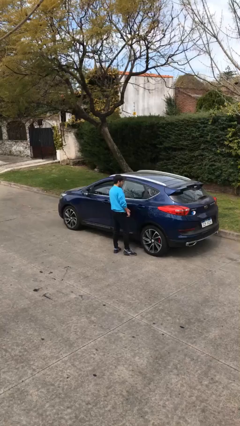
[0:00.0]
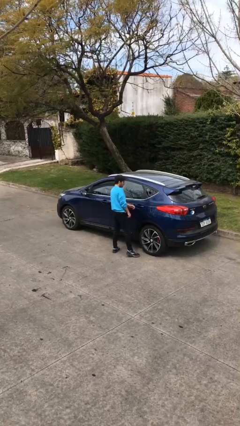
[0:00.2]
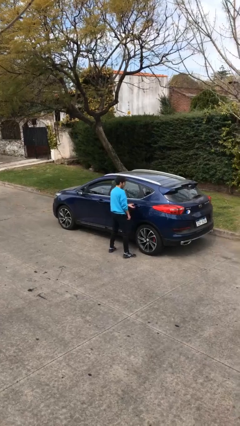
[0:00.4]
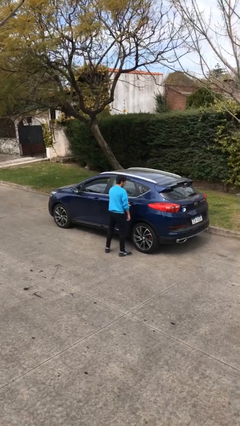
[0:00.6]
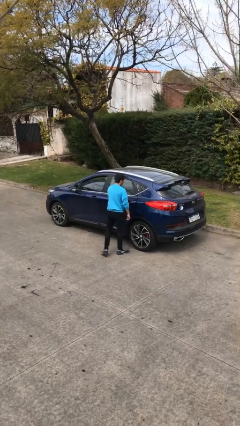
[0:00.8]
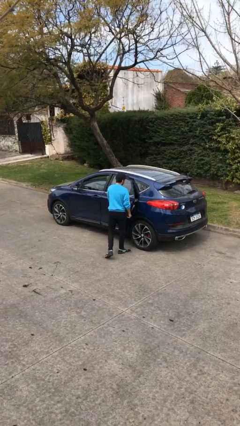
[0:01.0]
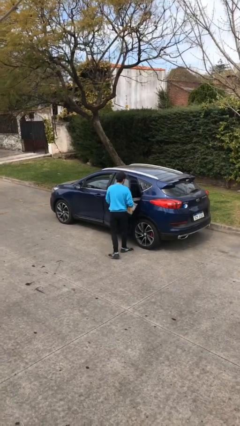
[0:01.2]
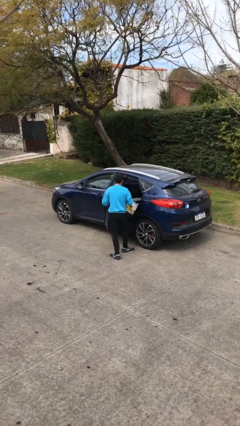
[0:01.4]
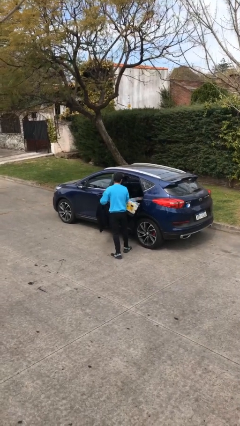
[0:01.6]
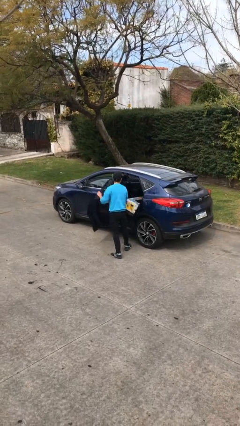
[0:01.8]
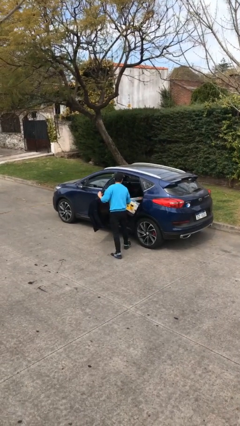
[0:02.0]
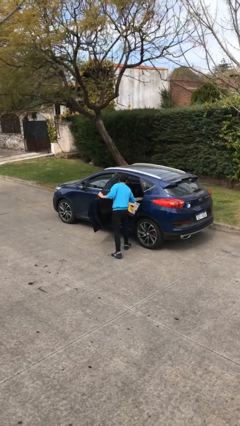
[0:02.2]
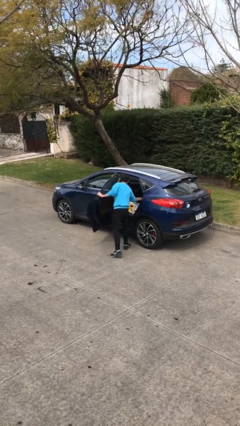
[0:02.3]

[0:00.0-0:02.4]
person opens car door

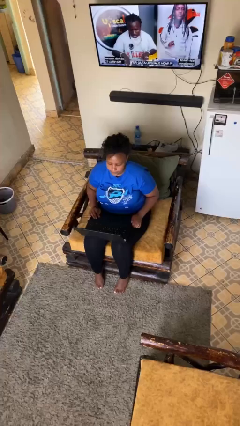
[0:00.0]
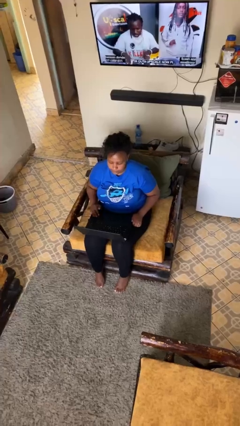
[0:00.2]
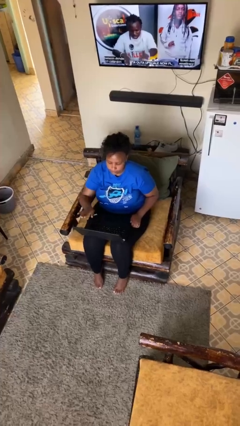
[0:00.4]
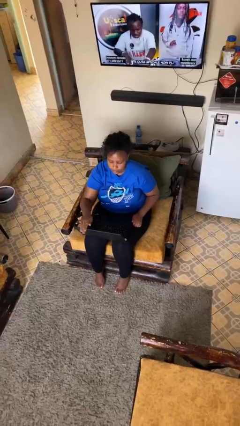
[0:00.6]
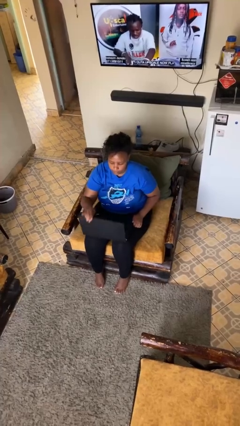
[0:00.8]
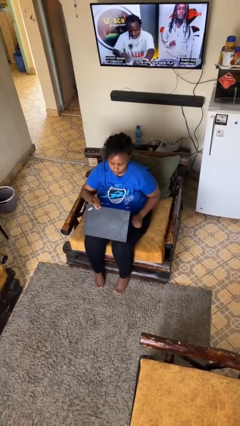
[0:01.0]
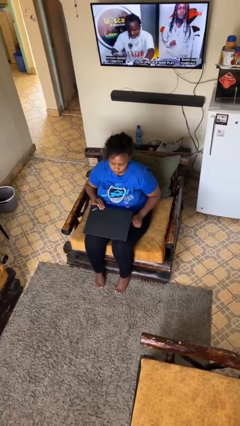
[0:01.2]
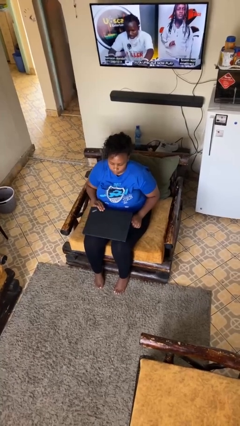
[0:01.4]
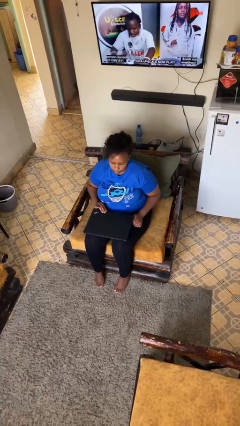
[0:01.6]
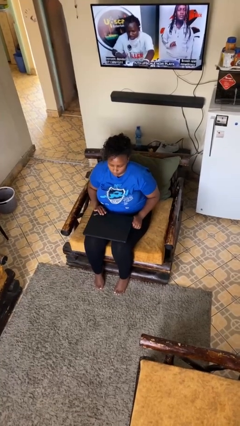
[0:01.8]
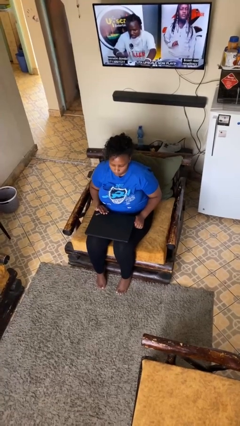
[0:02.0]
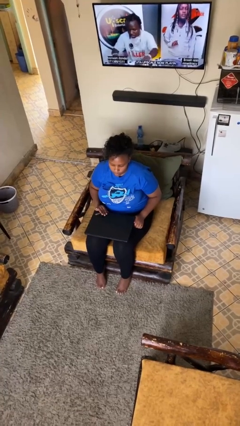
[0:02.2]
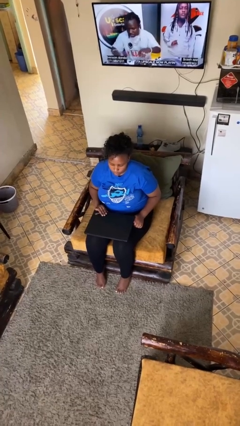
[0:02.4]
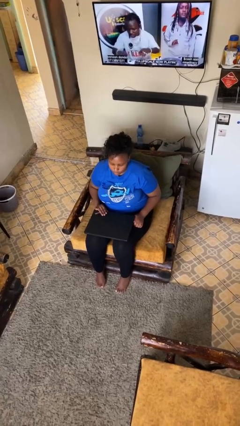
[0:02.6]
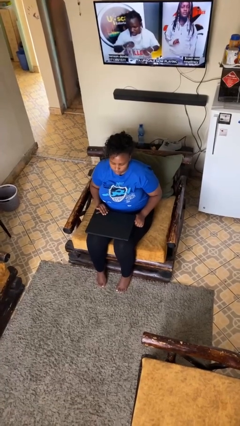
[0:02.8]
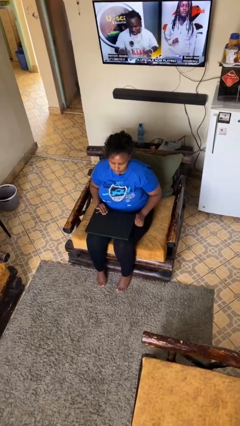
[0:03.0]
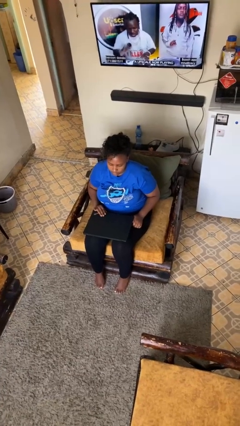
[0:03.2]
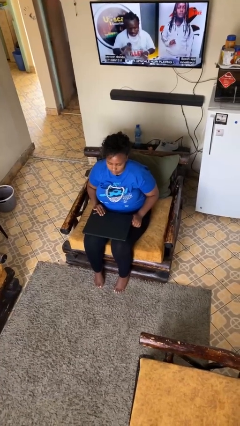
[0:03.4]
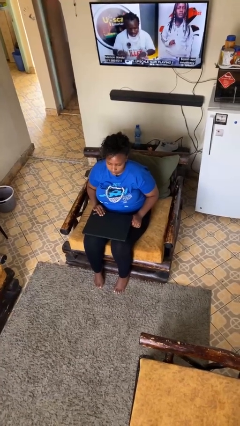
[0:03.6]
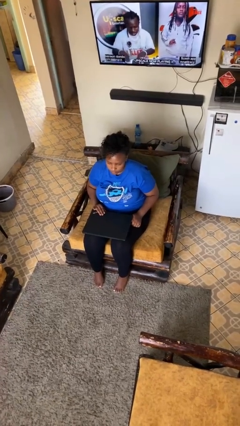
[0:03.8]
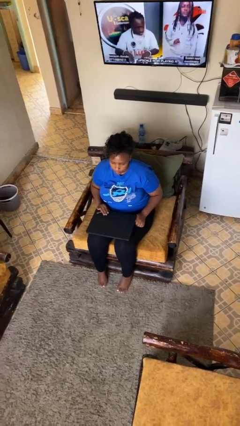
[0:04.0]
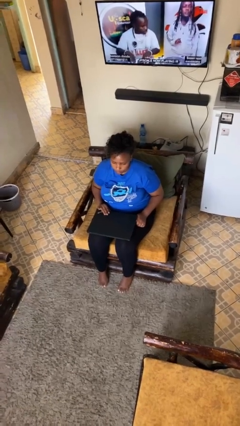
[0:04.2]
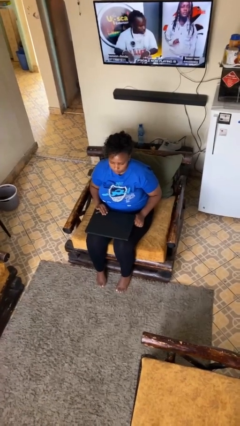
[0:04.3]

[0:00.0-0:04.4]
person closes laptop

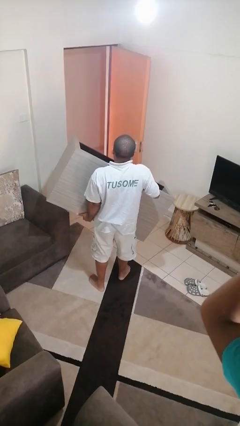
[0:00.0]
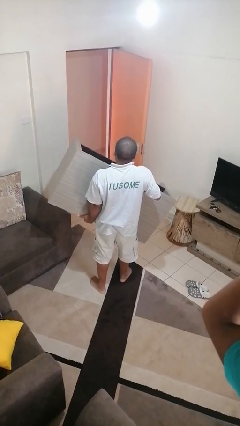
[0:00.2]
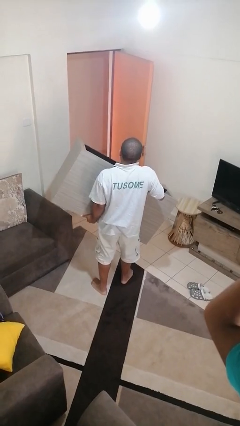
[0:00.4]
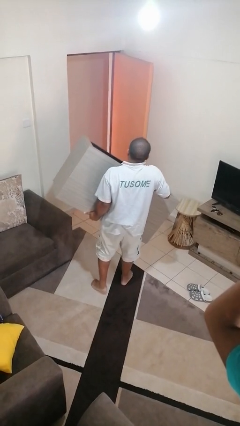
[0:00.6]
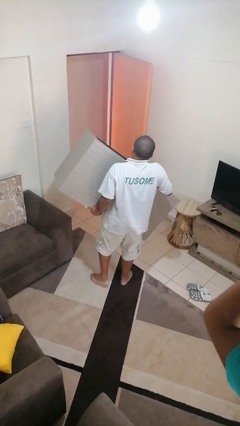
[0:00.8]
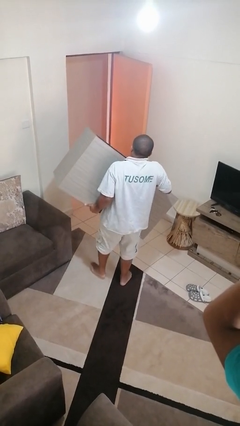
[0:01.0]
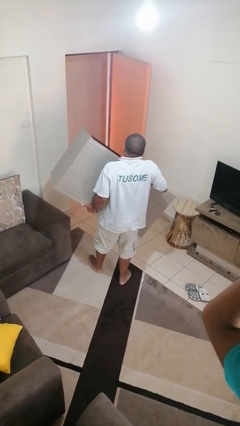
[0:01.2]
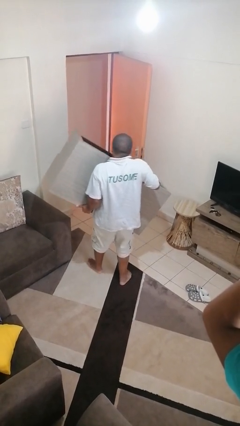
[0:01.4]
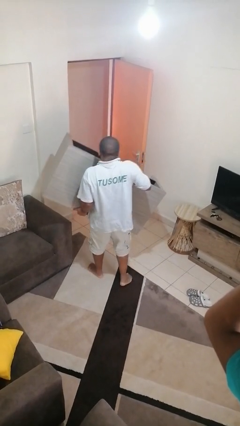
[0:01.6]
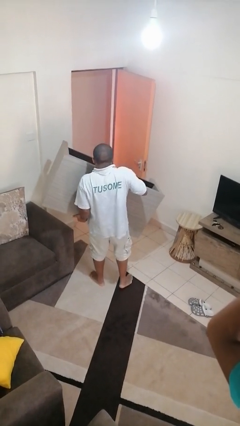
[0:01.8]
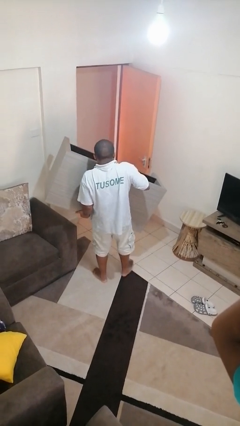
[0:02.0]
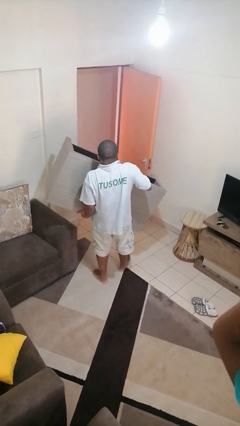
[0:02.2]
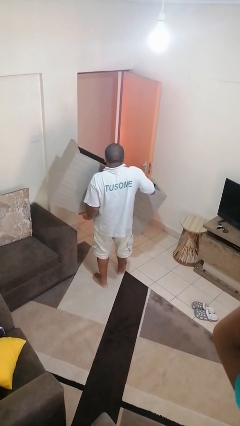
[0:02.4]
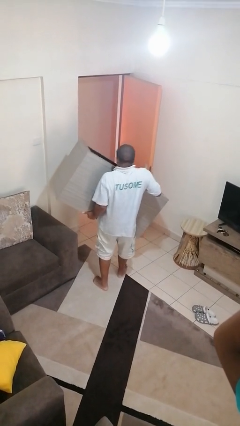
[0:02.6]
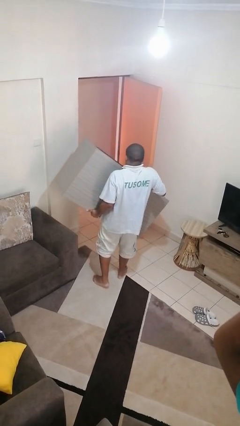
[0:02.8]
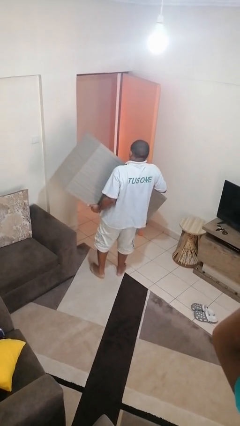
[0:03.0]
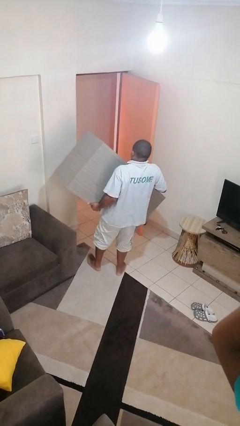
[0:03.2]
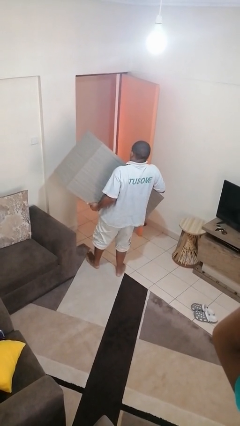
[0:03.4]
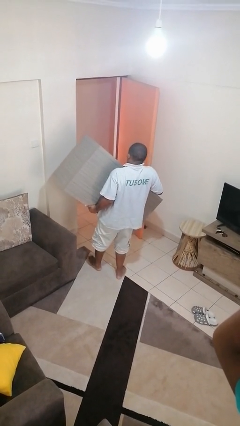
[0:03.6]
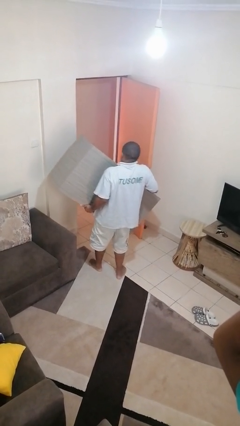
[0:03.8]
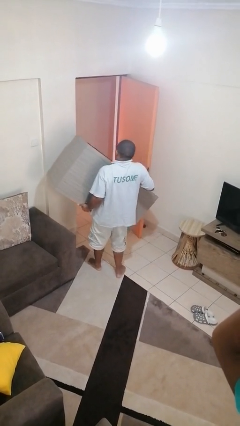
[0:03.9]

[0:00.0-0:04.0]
person carries furniture

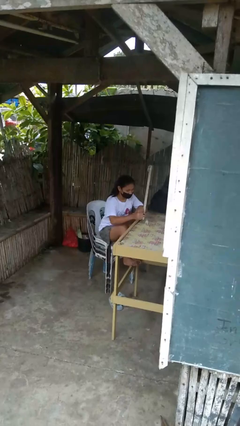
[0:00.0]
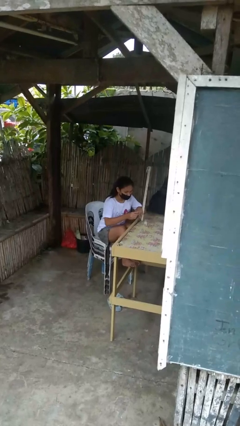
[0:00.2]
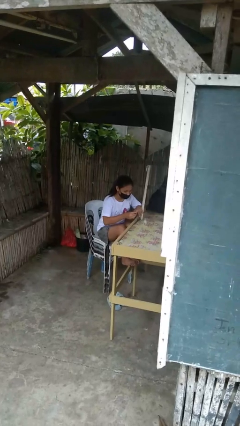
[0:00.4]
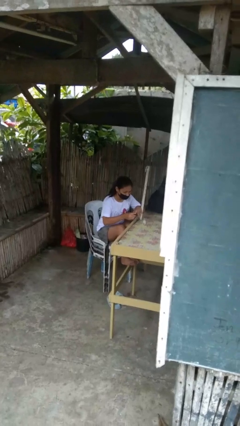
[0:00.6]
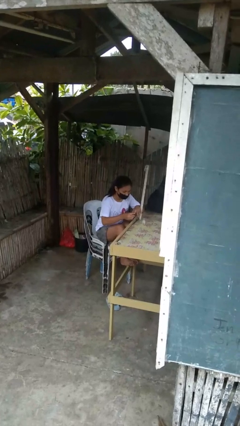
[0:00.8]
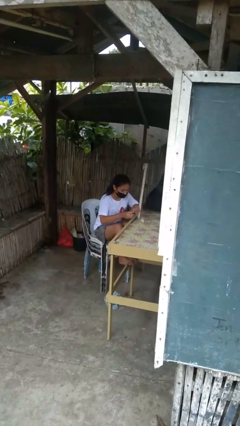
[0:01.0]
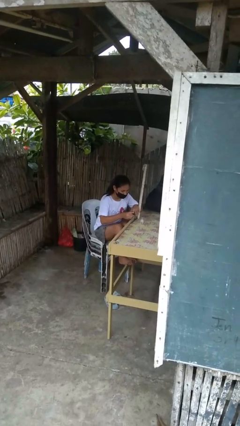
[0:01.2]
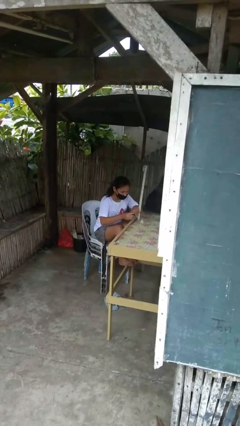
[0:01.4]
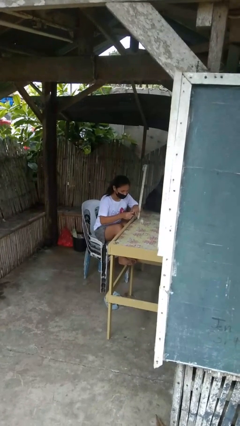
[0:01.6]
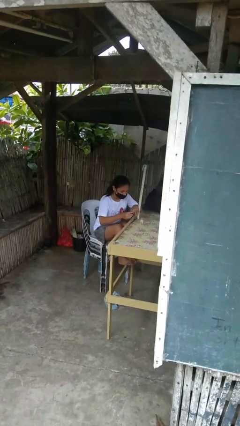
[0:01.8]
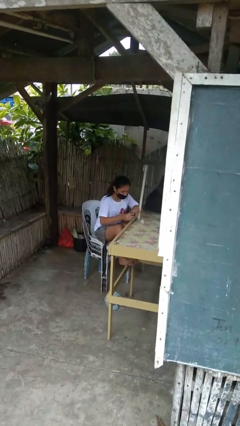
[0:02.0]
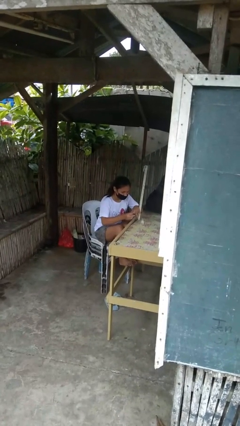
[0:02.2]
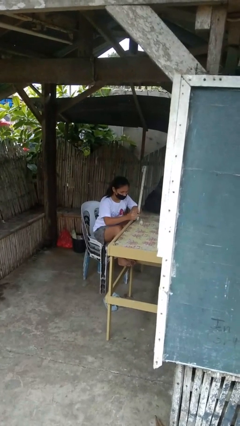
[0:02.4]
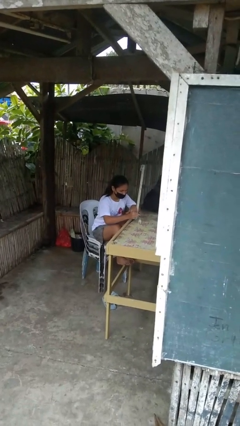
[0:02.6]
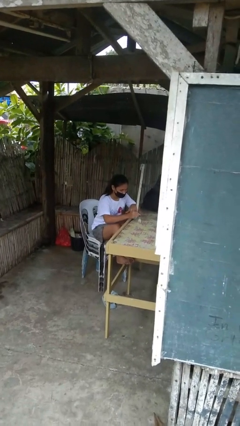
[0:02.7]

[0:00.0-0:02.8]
person paints fingernails

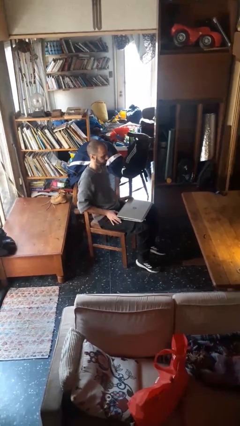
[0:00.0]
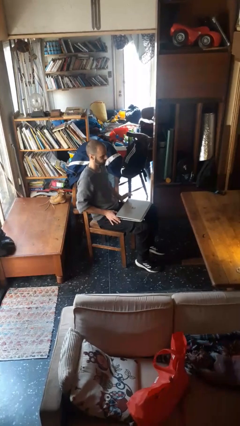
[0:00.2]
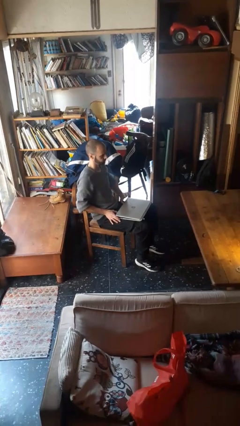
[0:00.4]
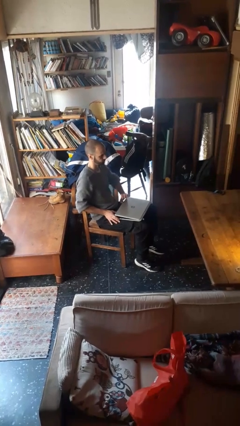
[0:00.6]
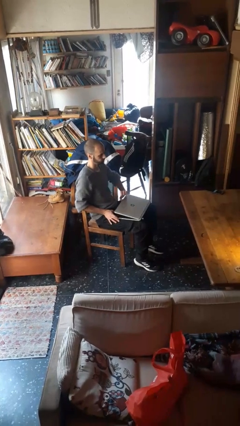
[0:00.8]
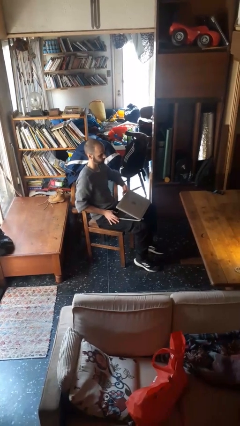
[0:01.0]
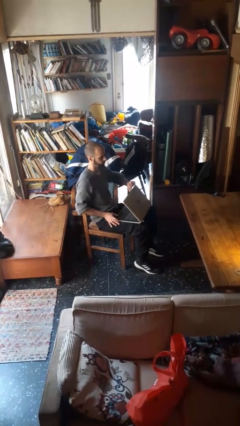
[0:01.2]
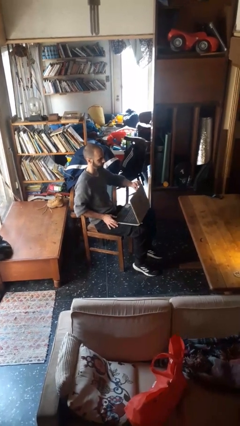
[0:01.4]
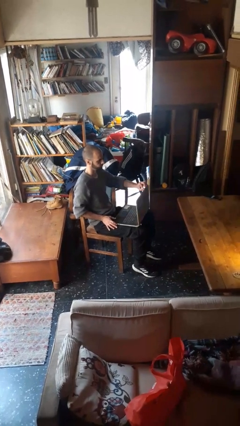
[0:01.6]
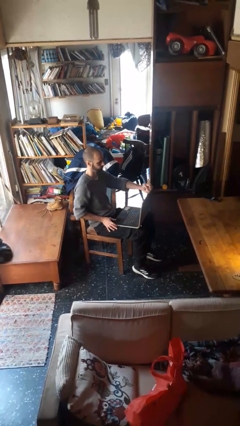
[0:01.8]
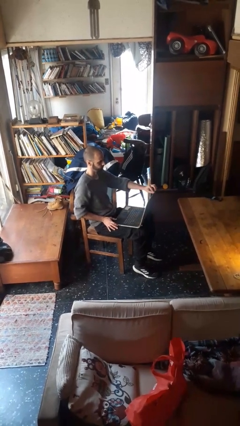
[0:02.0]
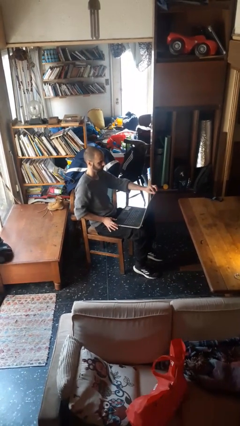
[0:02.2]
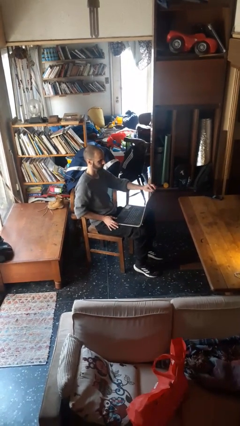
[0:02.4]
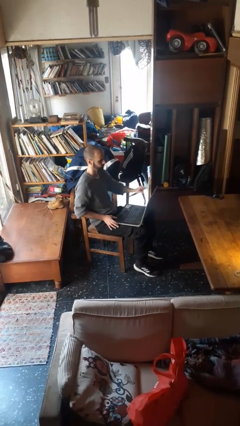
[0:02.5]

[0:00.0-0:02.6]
person opens laptop

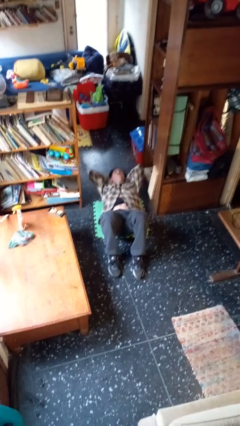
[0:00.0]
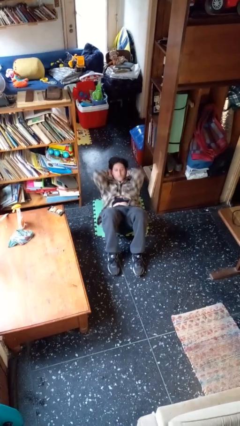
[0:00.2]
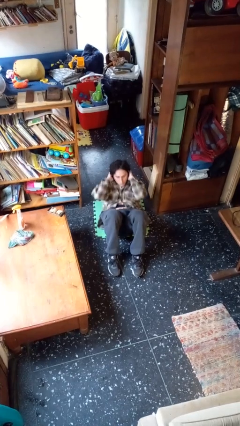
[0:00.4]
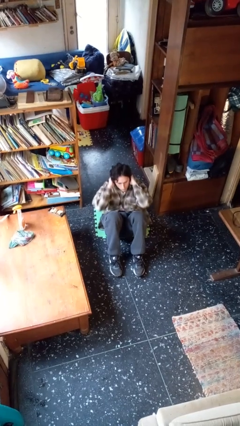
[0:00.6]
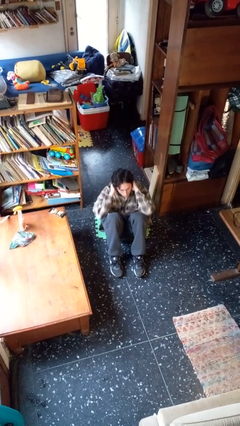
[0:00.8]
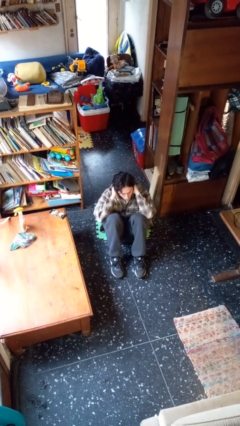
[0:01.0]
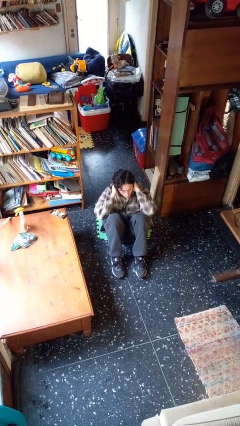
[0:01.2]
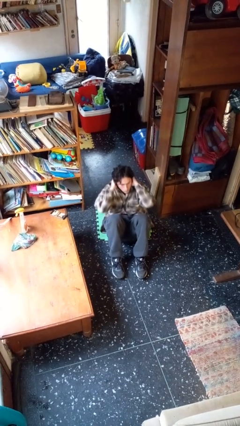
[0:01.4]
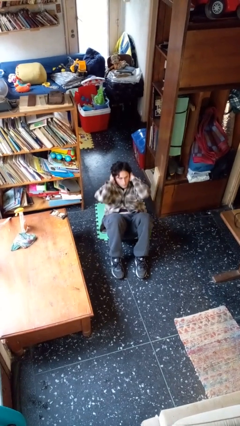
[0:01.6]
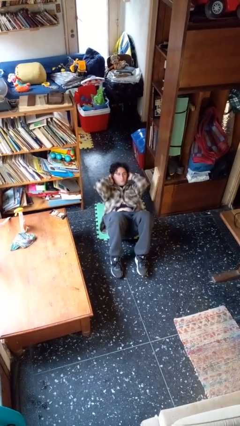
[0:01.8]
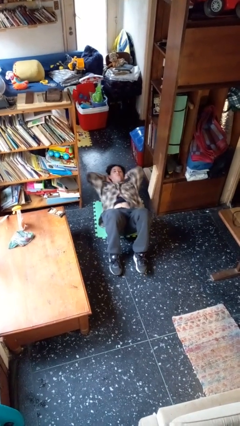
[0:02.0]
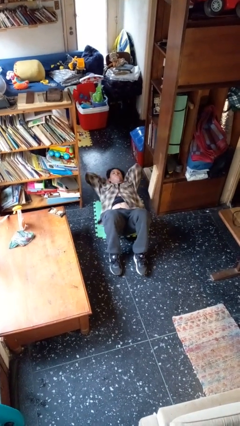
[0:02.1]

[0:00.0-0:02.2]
person exercises with situp
